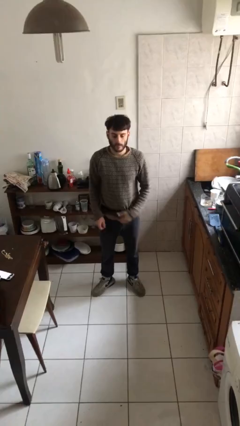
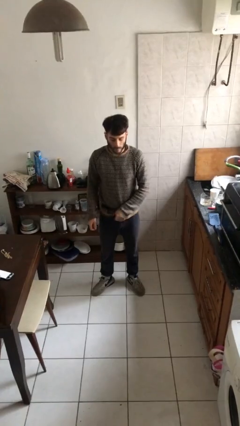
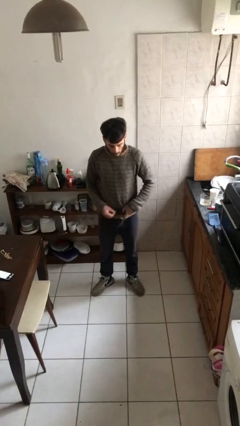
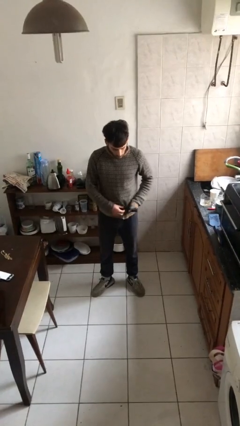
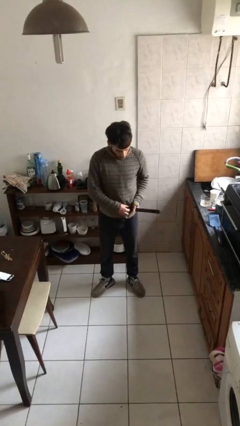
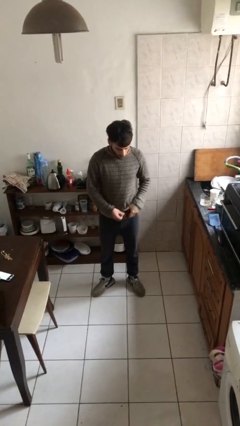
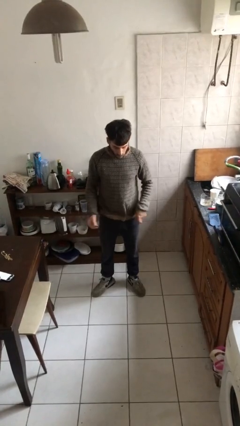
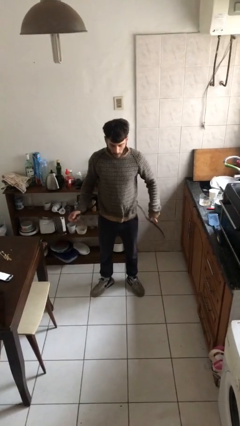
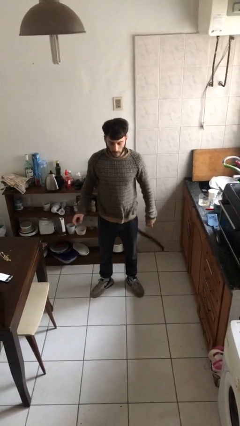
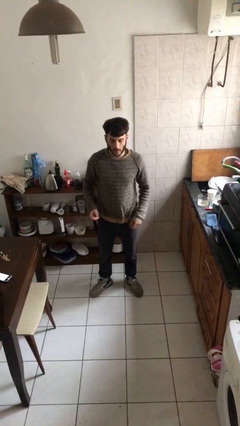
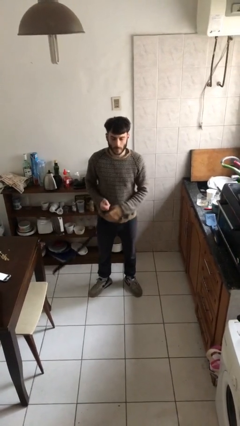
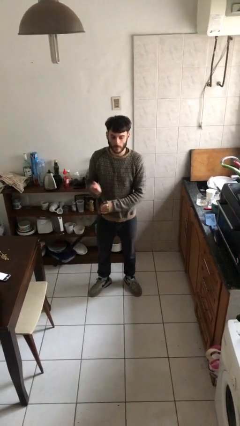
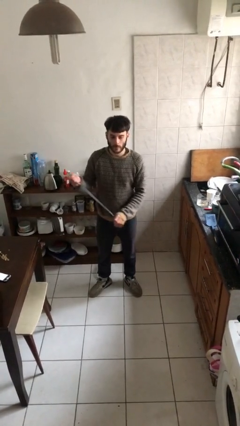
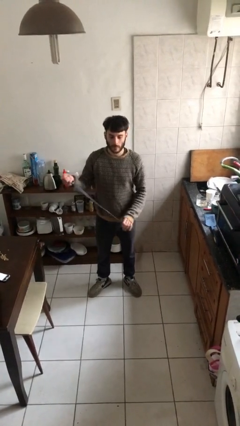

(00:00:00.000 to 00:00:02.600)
person takes off belt

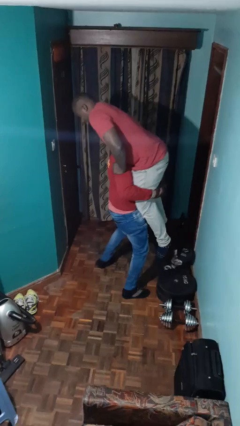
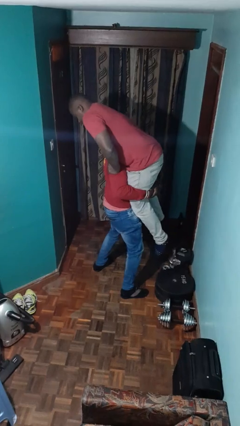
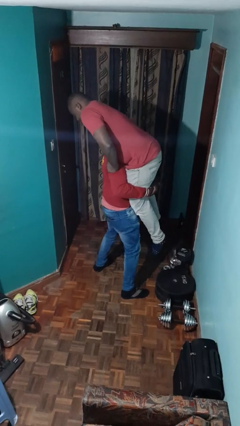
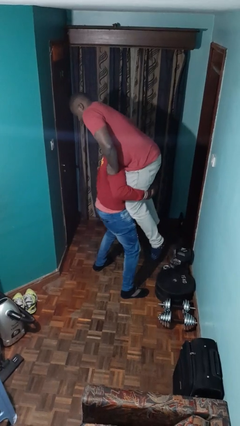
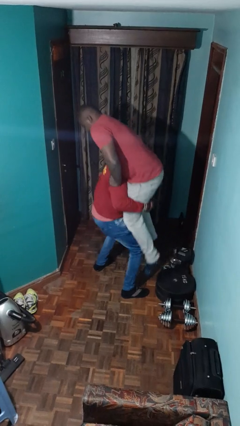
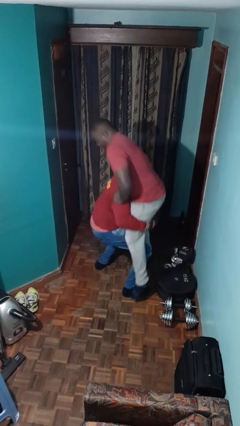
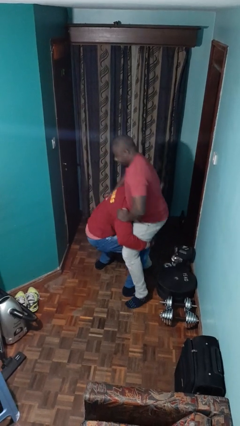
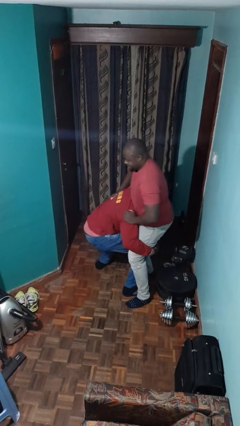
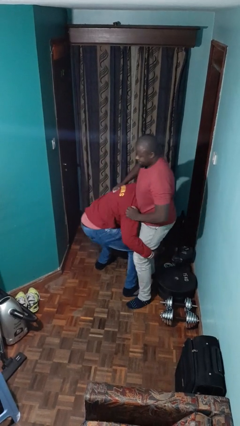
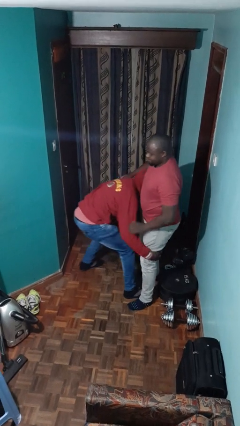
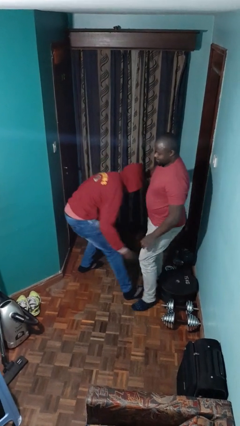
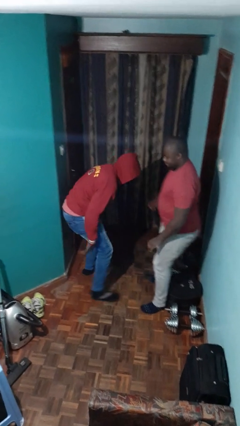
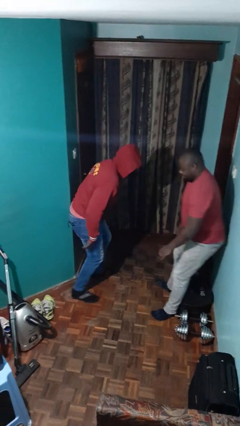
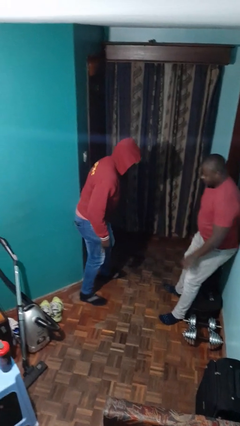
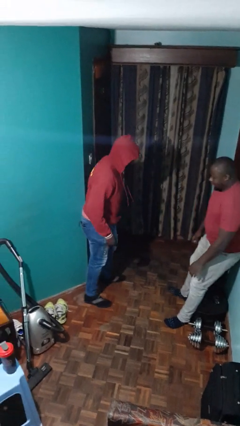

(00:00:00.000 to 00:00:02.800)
person puts down person

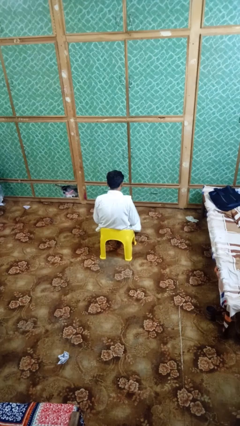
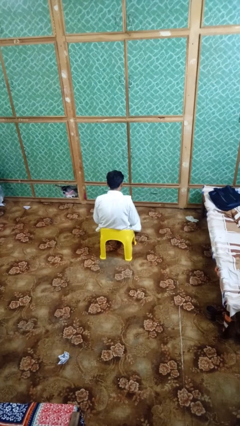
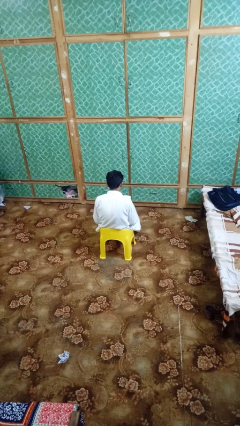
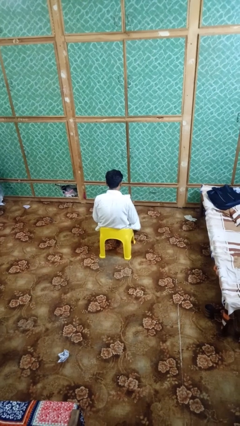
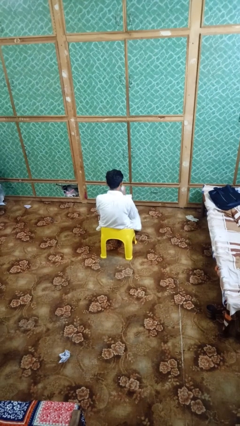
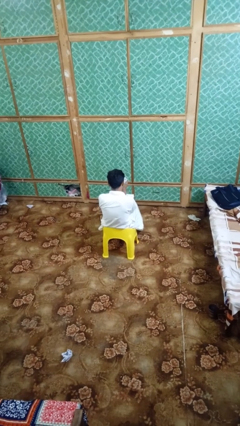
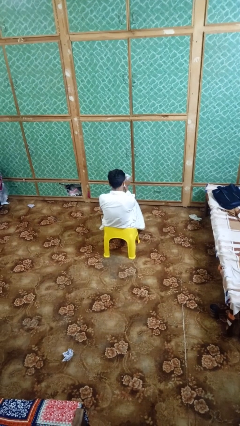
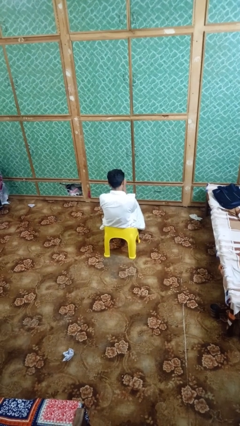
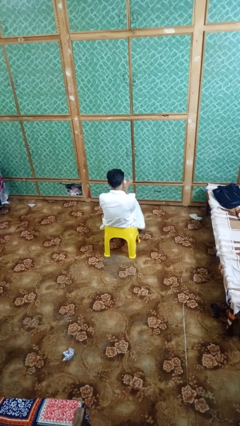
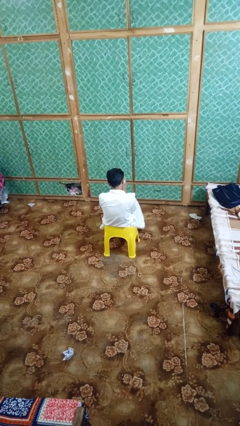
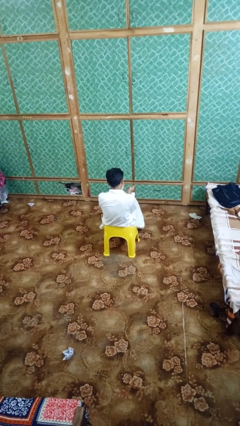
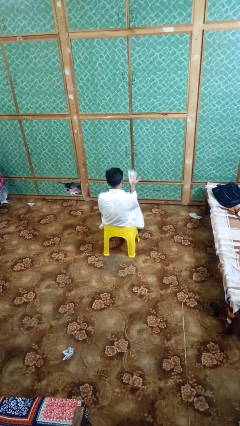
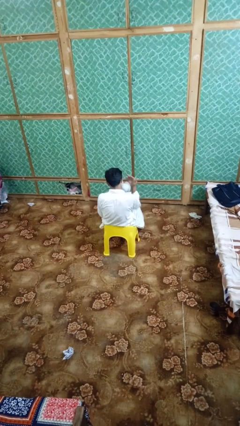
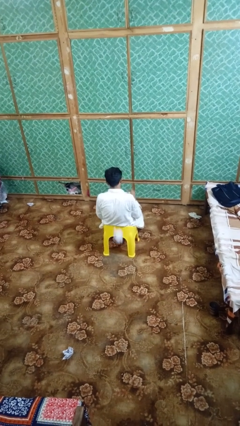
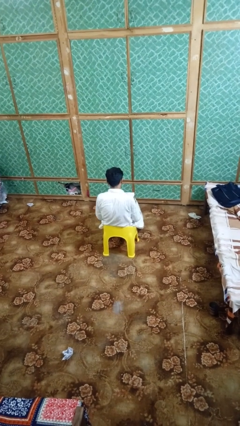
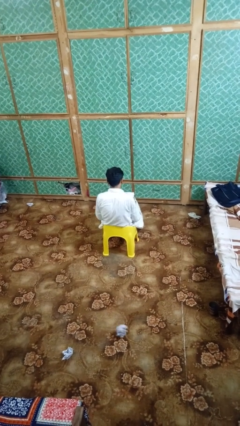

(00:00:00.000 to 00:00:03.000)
person crumples paper

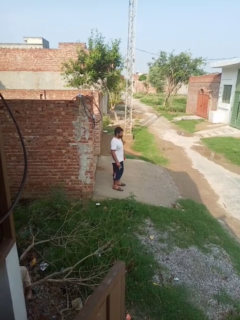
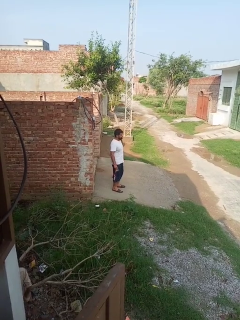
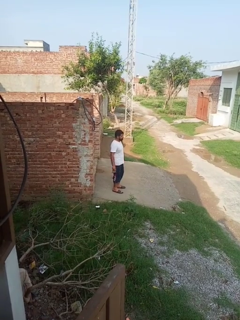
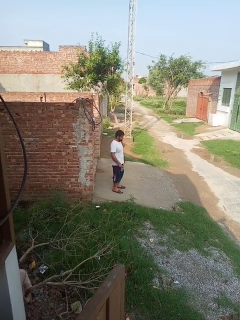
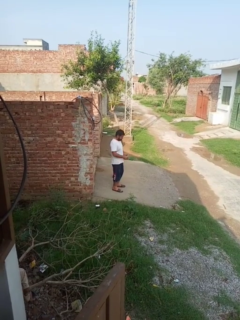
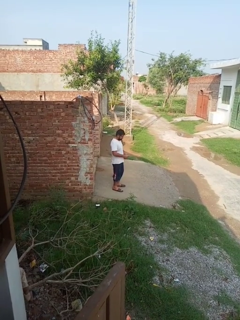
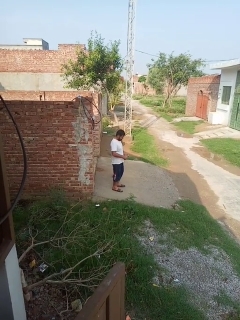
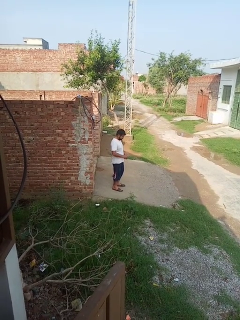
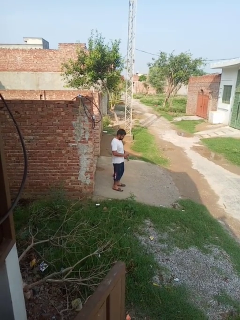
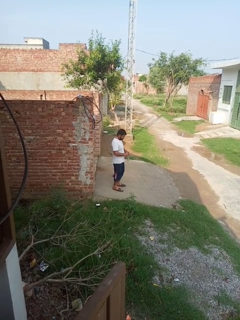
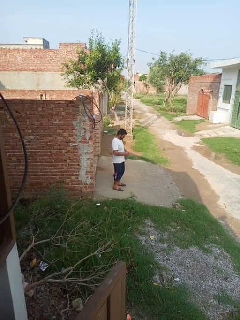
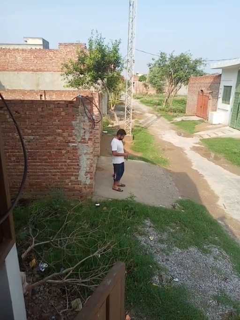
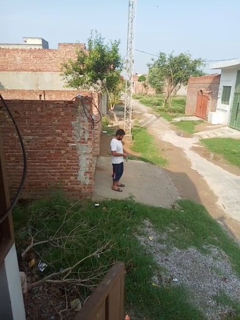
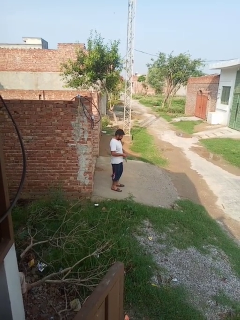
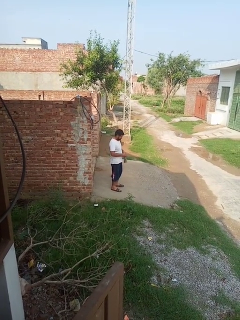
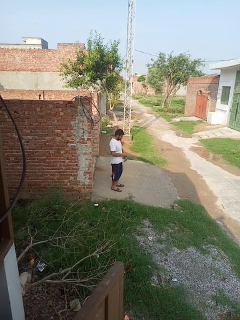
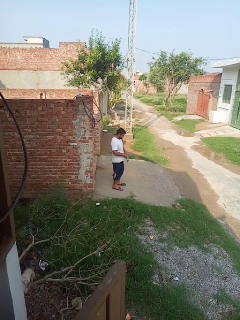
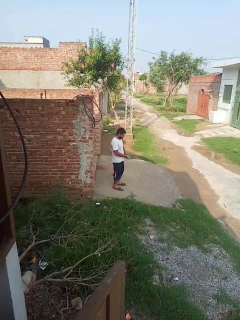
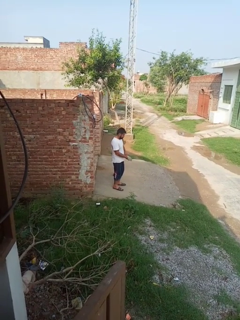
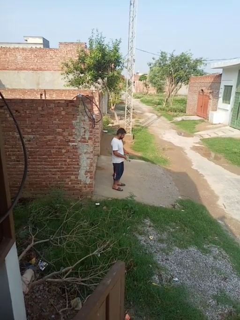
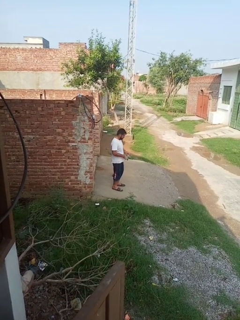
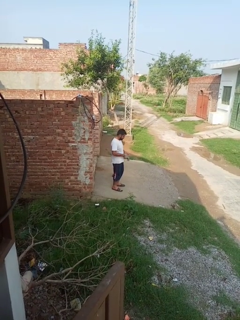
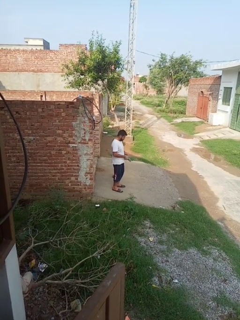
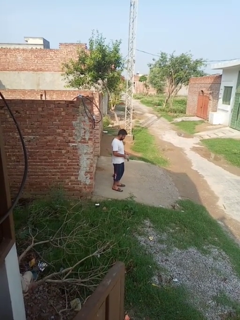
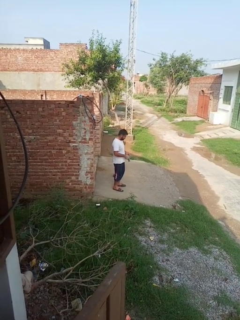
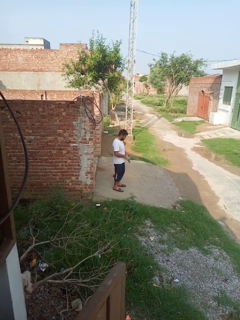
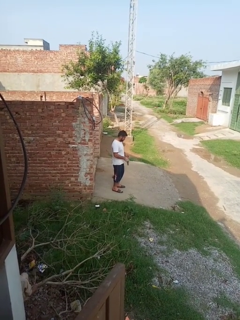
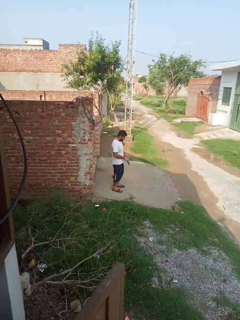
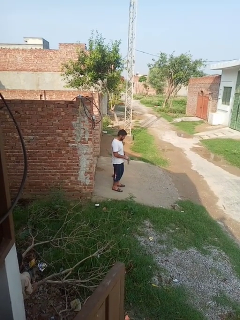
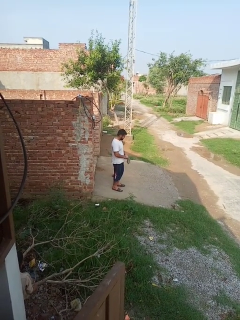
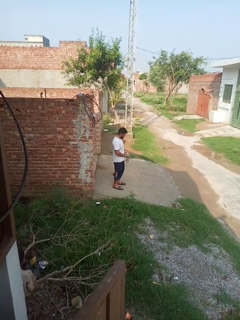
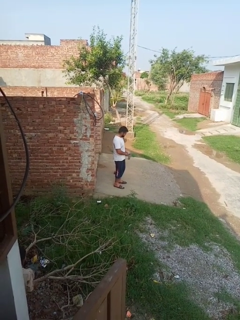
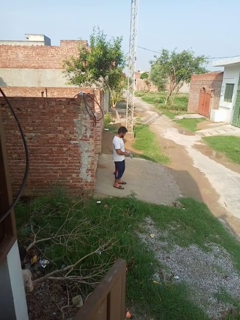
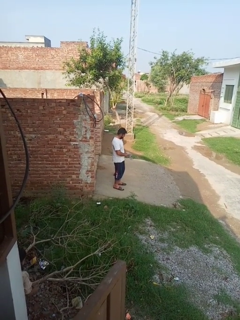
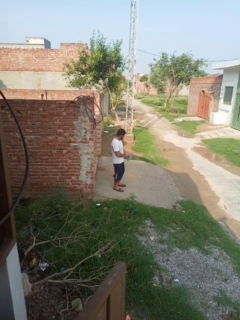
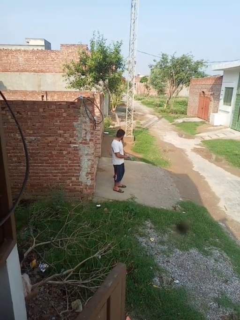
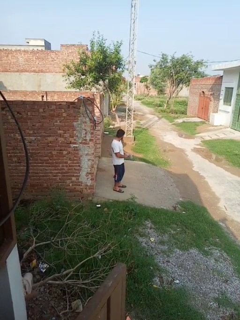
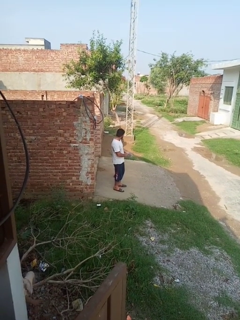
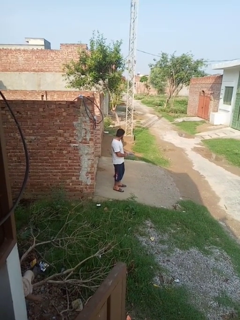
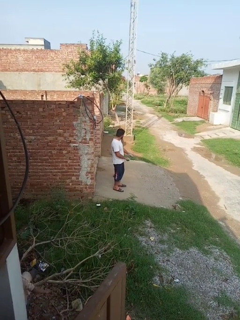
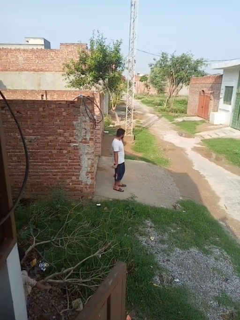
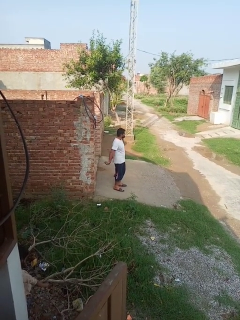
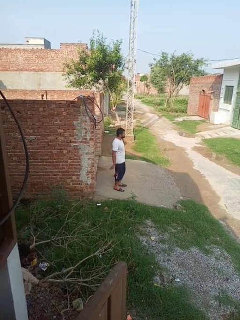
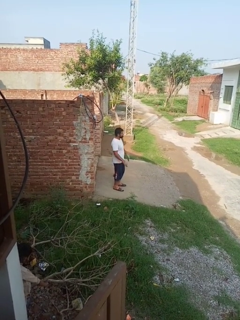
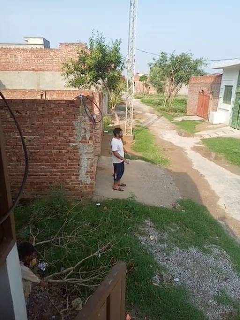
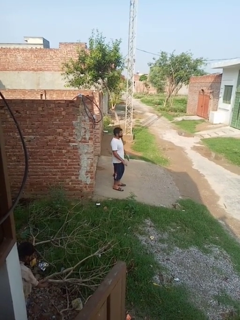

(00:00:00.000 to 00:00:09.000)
person puts on gloves

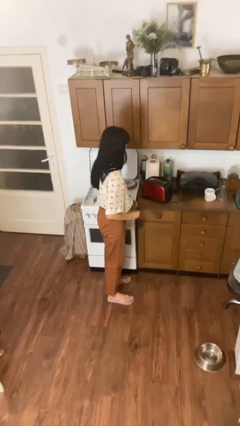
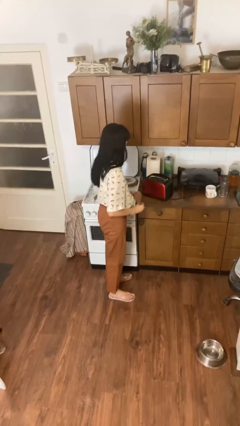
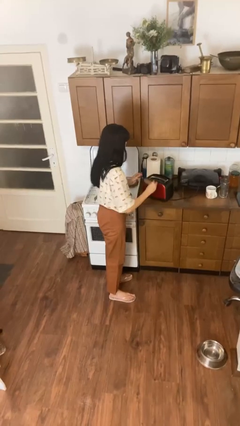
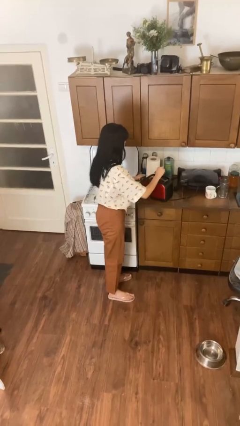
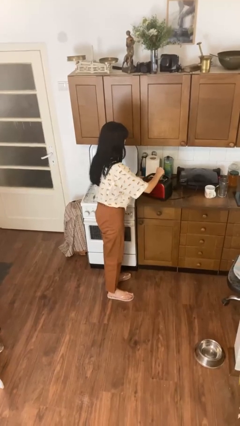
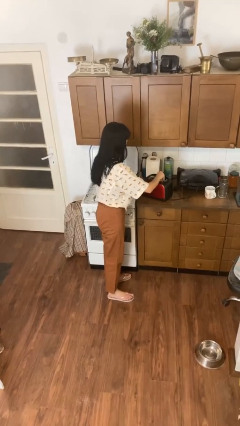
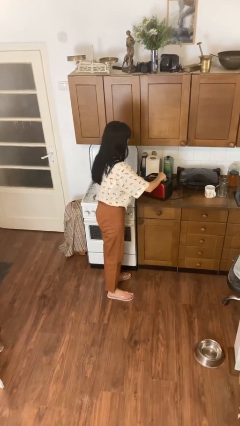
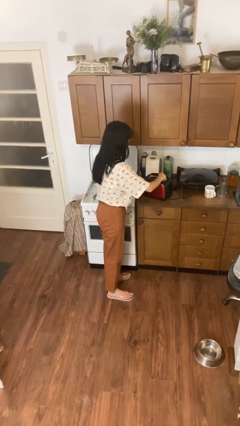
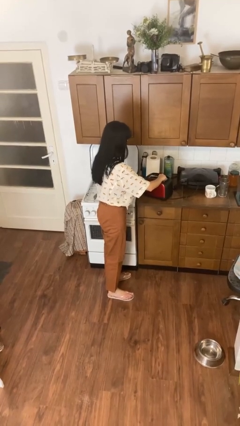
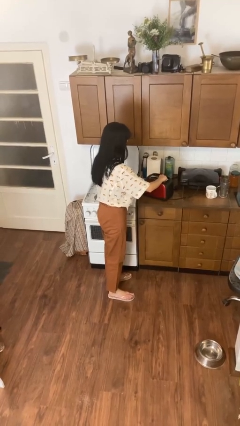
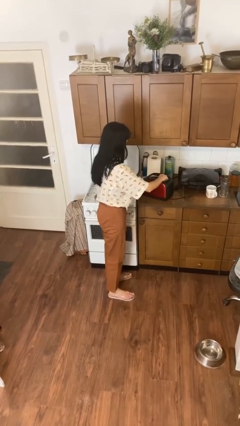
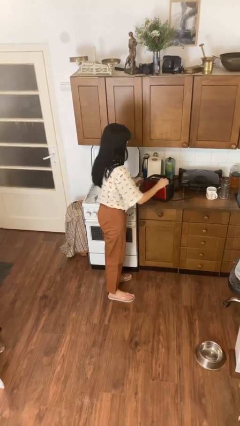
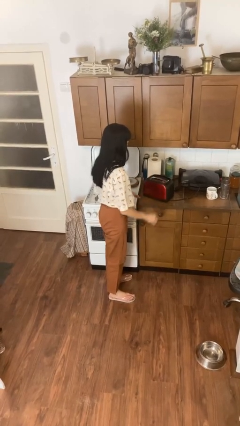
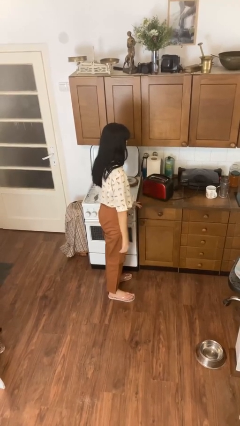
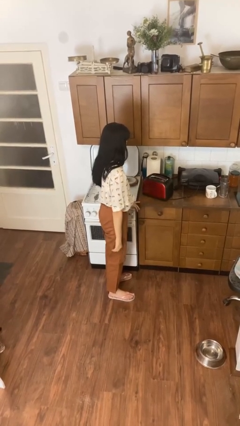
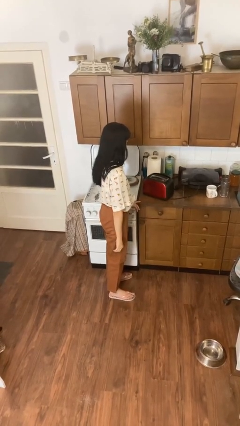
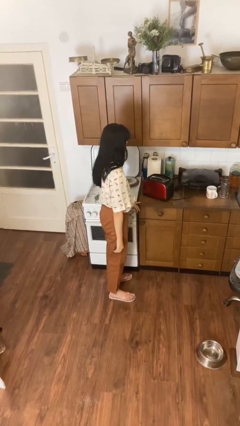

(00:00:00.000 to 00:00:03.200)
person puts object into toaster
